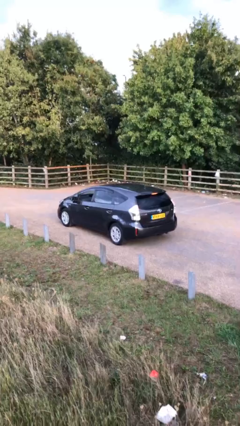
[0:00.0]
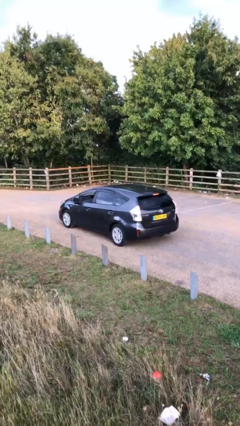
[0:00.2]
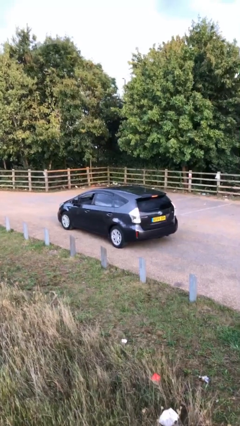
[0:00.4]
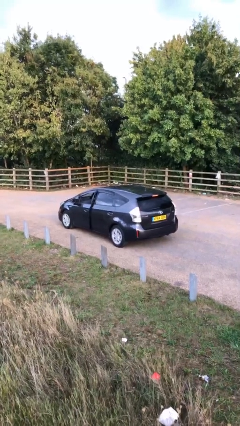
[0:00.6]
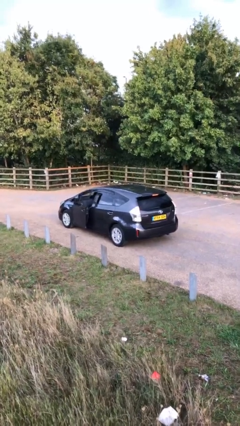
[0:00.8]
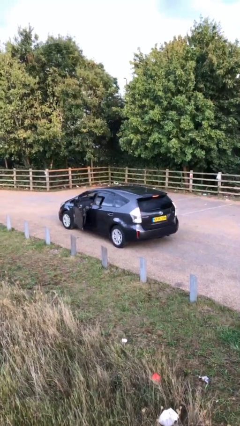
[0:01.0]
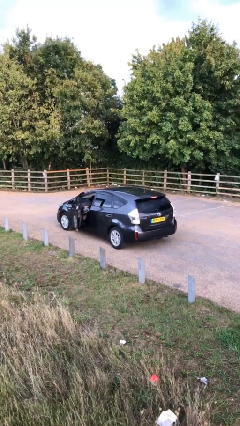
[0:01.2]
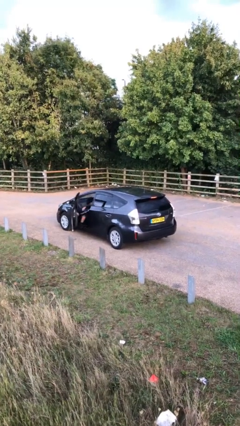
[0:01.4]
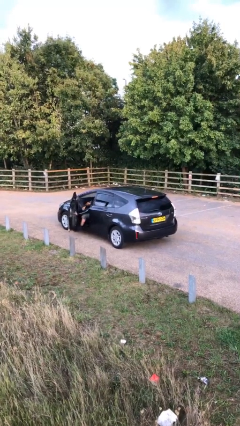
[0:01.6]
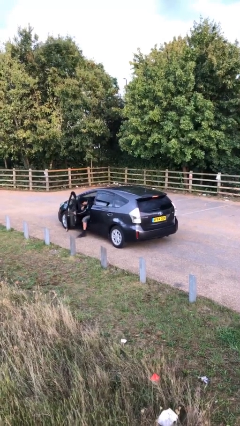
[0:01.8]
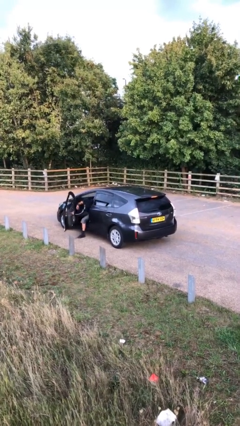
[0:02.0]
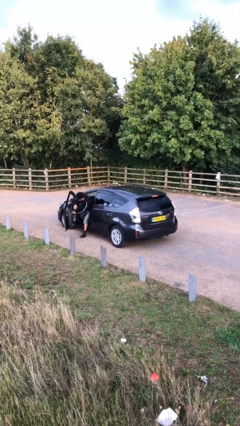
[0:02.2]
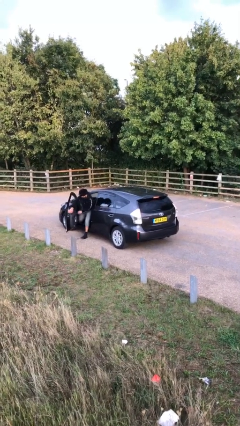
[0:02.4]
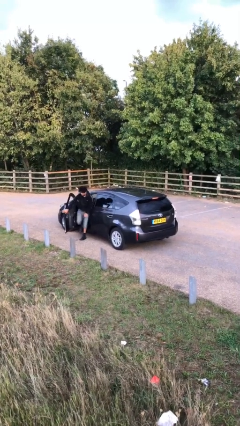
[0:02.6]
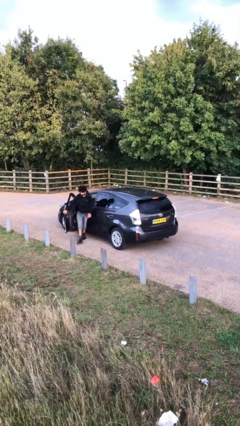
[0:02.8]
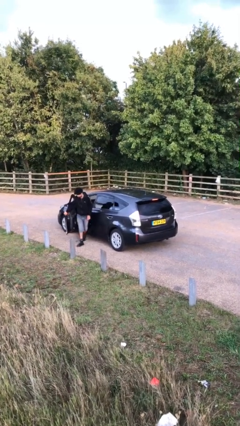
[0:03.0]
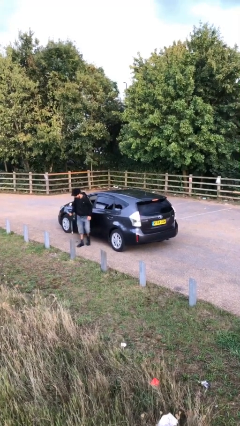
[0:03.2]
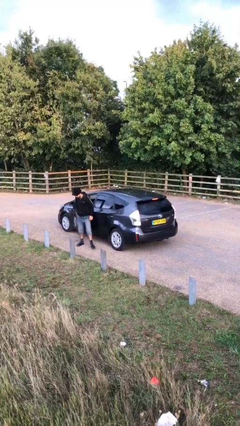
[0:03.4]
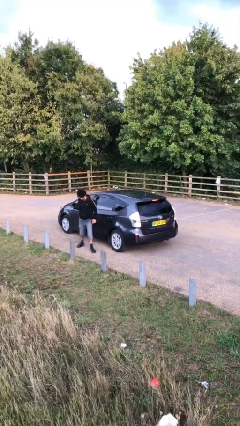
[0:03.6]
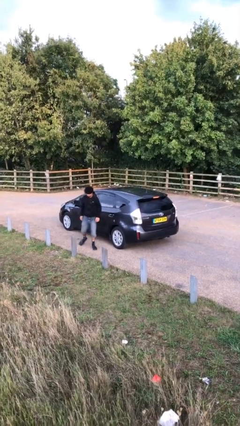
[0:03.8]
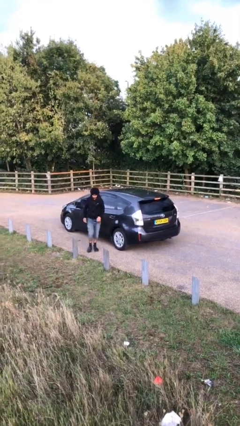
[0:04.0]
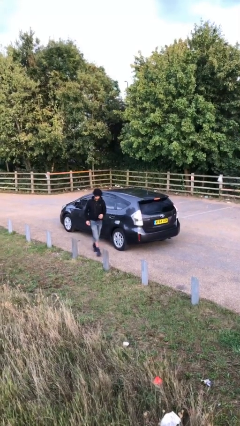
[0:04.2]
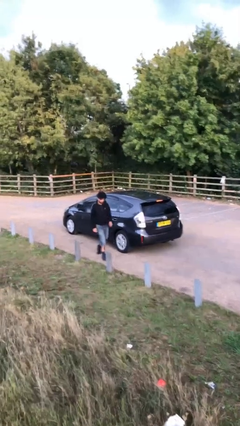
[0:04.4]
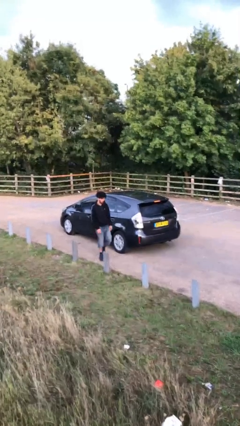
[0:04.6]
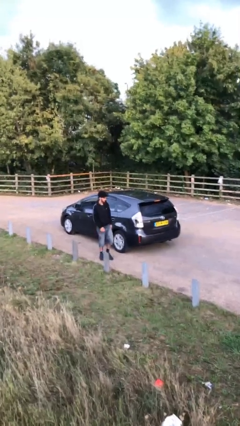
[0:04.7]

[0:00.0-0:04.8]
car drops off person

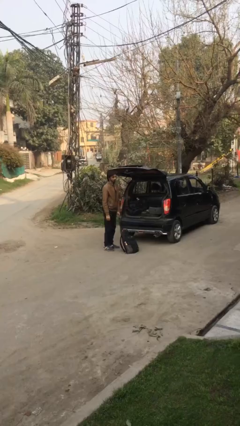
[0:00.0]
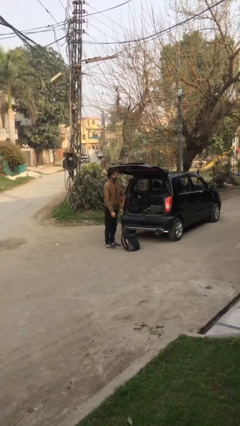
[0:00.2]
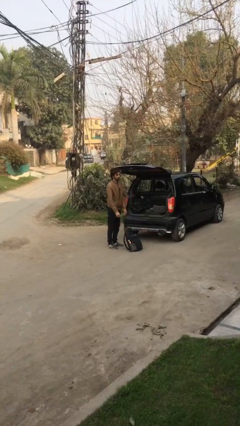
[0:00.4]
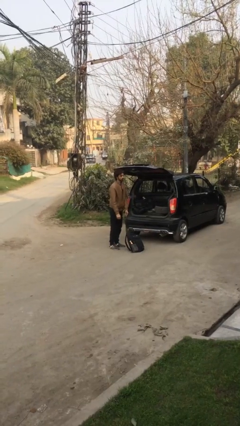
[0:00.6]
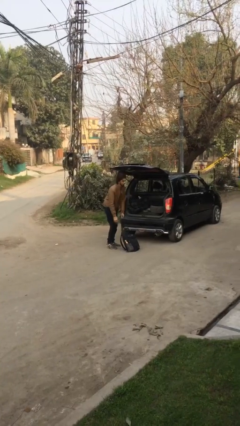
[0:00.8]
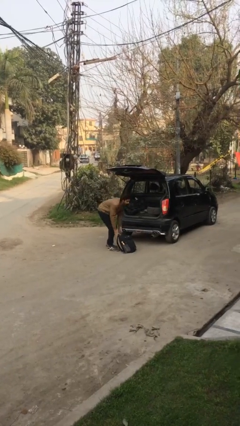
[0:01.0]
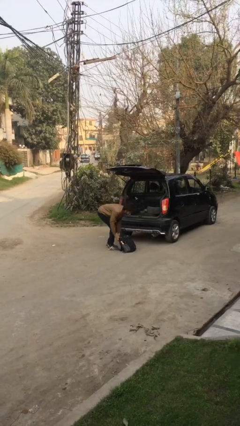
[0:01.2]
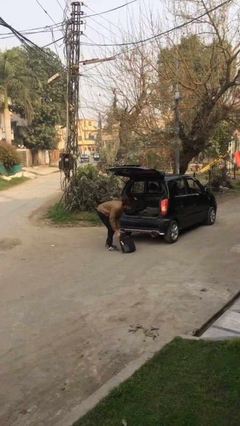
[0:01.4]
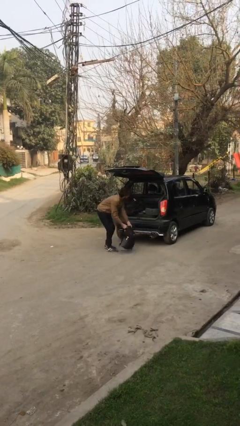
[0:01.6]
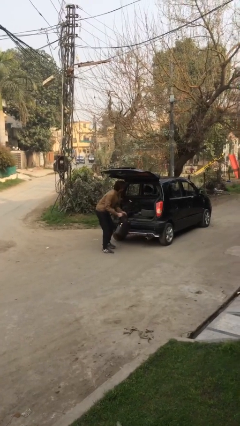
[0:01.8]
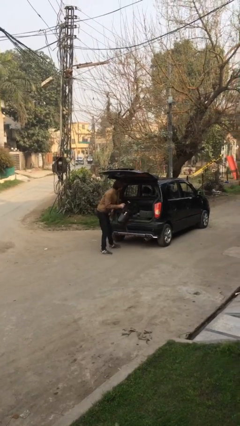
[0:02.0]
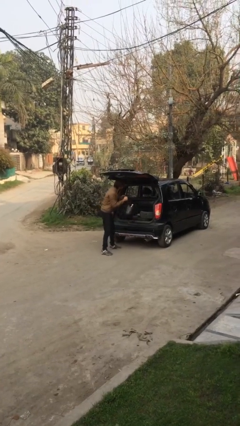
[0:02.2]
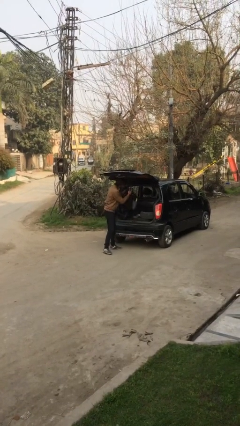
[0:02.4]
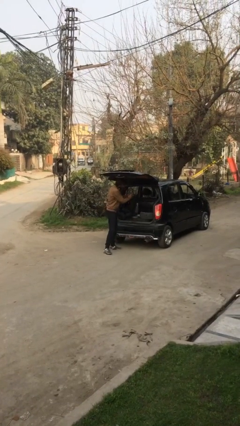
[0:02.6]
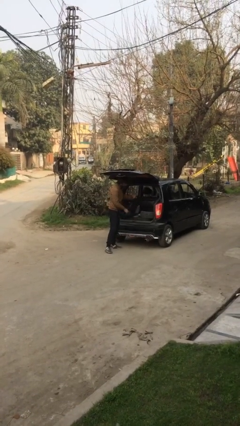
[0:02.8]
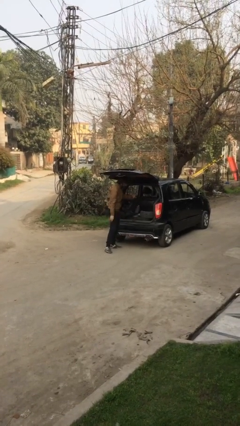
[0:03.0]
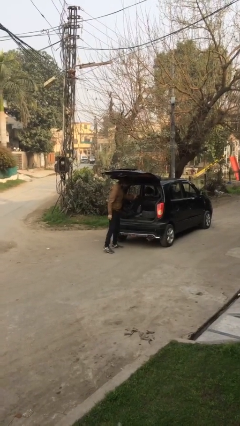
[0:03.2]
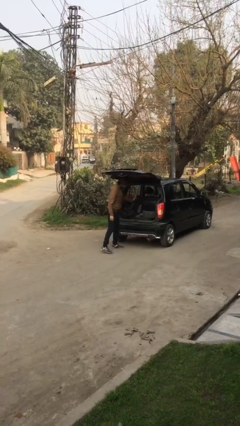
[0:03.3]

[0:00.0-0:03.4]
person loads car

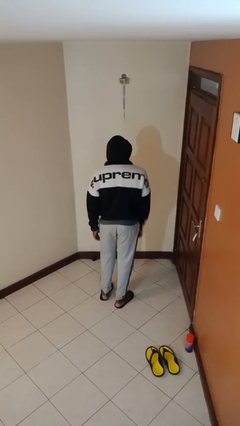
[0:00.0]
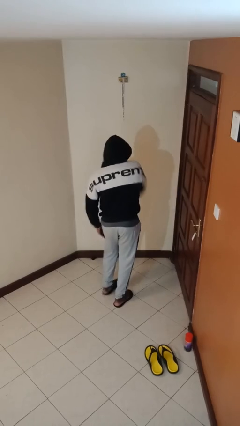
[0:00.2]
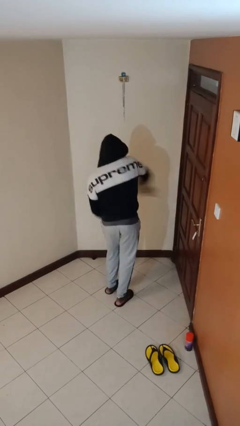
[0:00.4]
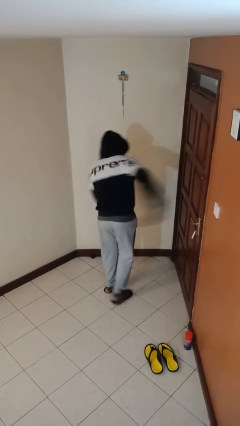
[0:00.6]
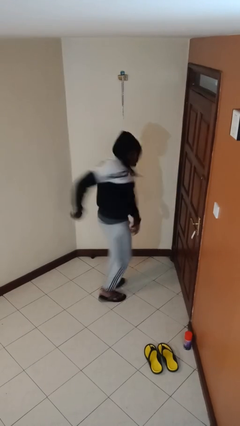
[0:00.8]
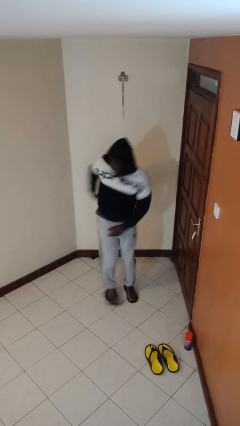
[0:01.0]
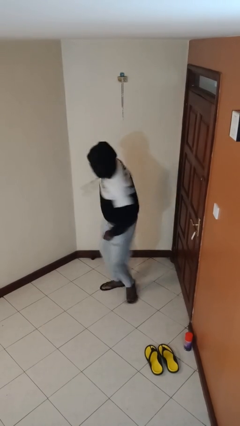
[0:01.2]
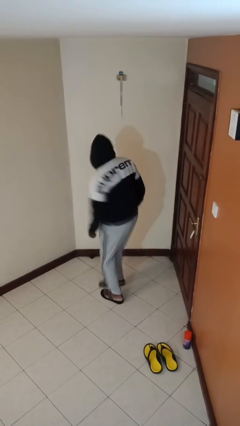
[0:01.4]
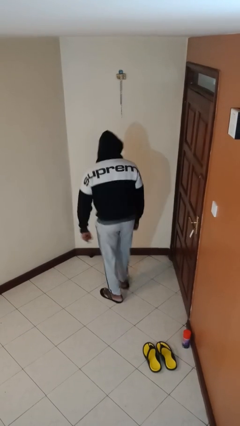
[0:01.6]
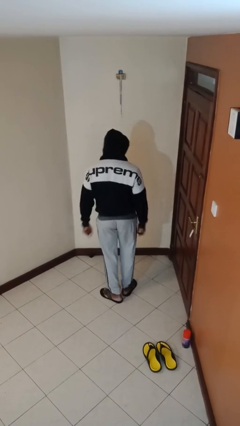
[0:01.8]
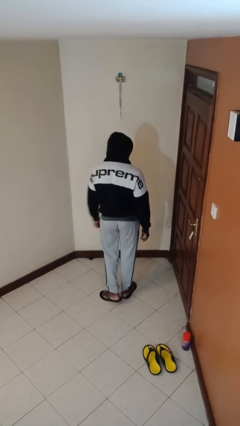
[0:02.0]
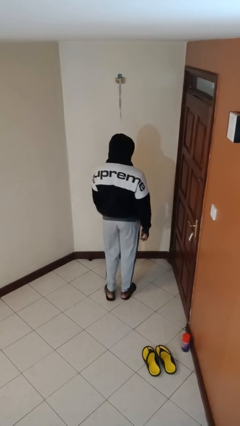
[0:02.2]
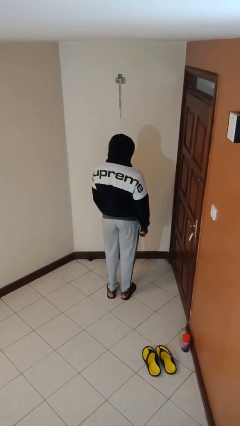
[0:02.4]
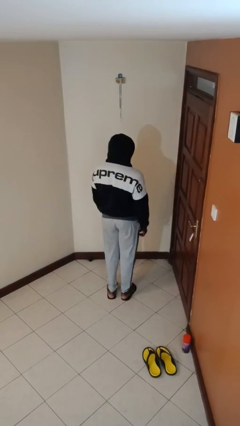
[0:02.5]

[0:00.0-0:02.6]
person twirls

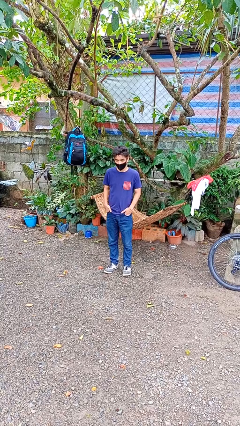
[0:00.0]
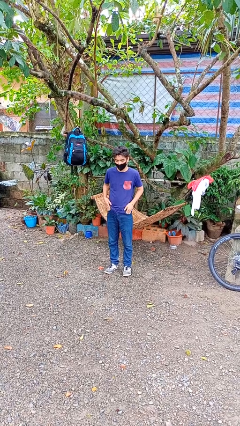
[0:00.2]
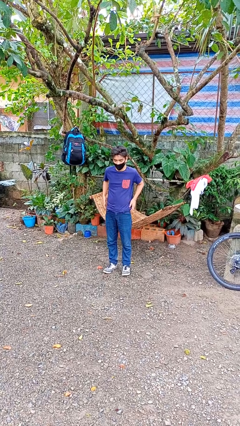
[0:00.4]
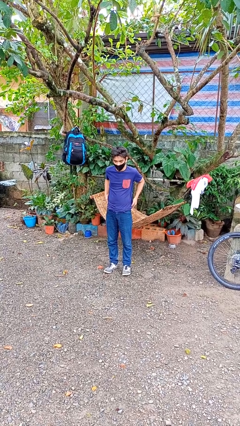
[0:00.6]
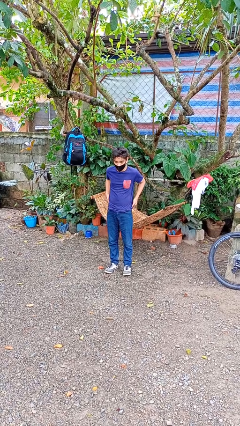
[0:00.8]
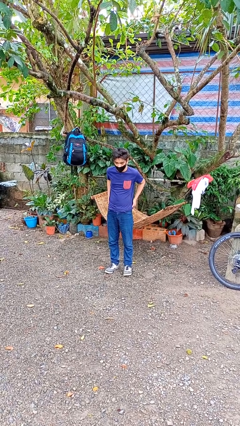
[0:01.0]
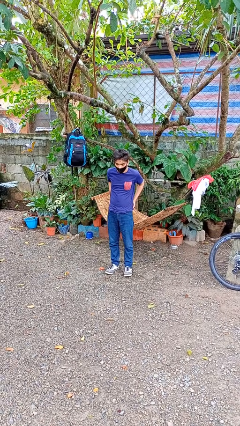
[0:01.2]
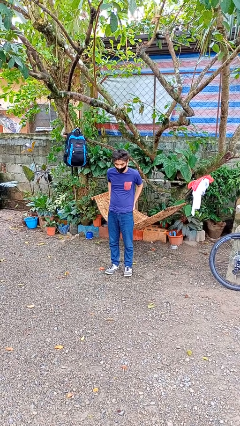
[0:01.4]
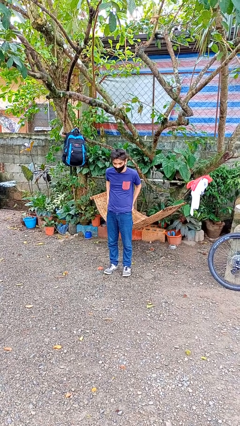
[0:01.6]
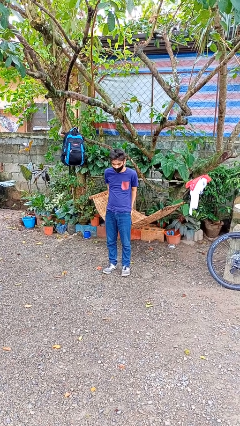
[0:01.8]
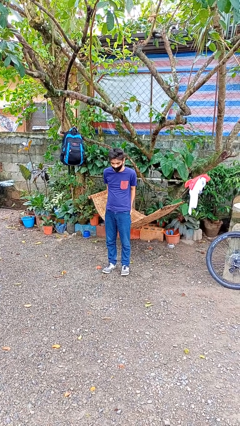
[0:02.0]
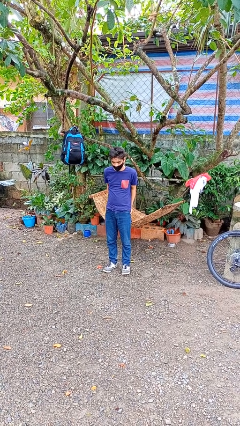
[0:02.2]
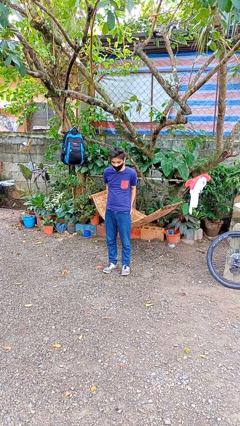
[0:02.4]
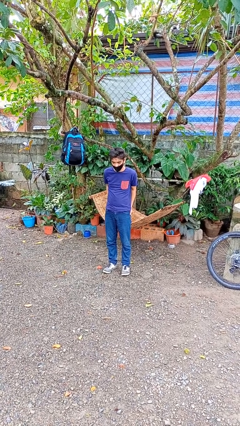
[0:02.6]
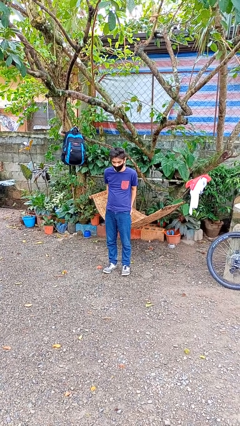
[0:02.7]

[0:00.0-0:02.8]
person puts hands in back pockets

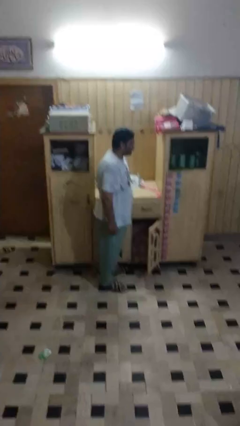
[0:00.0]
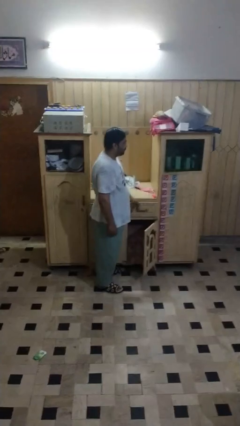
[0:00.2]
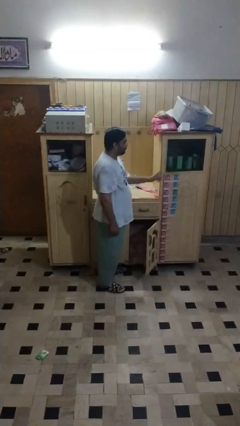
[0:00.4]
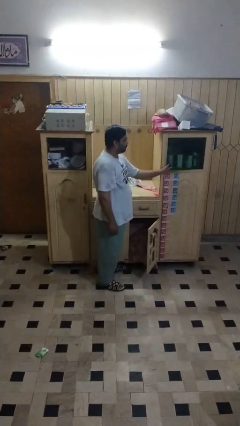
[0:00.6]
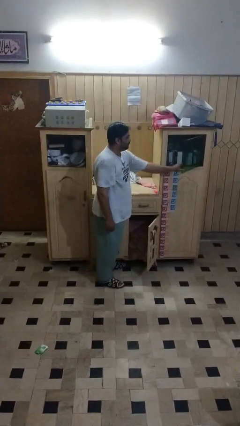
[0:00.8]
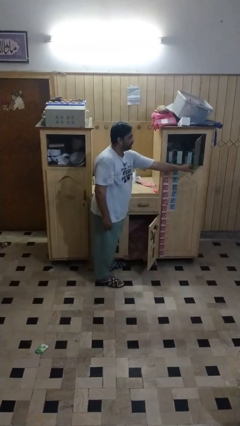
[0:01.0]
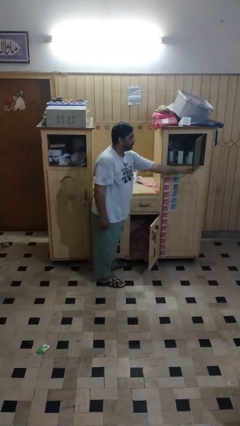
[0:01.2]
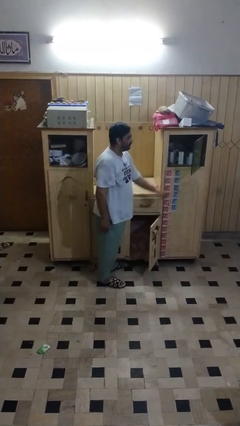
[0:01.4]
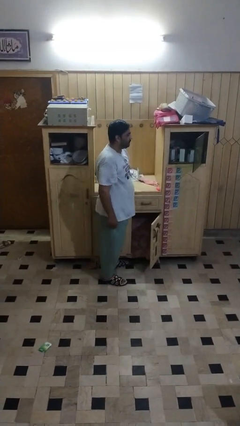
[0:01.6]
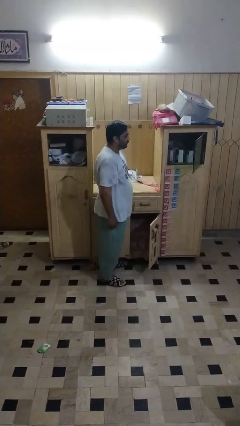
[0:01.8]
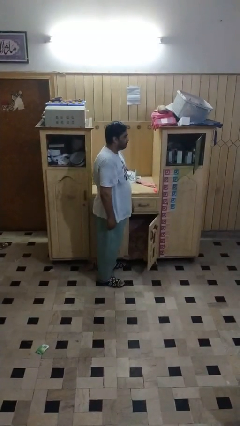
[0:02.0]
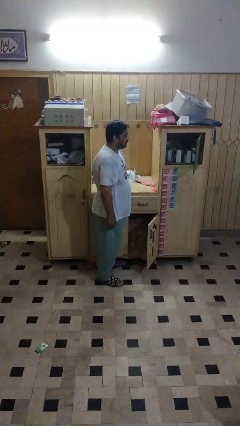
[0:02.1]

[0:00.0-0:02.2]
person closes cabinet

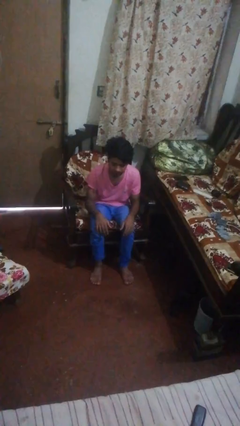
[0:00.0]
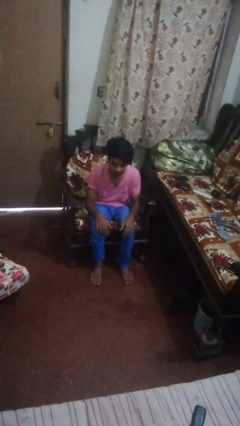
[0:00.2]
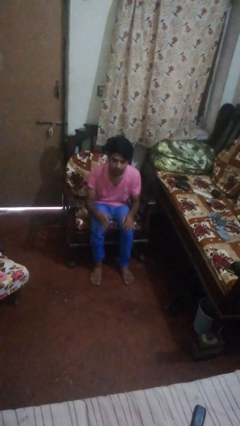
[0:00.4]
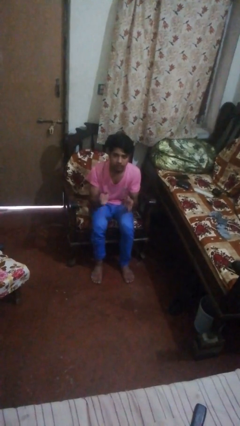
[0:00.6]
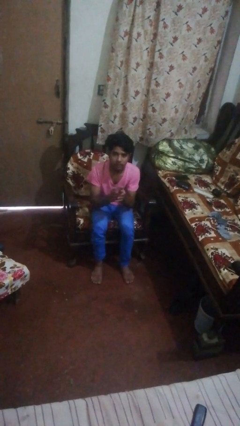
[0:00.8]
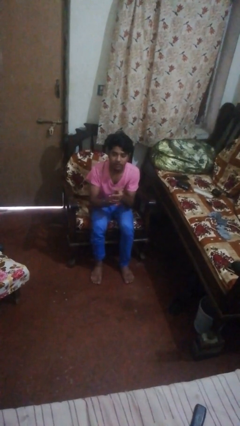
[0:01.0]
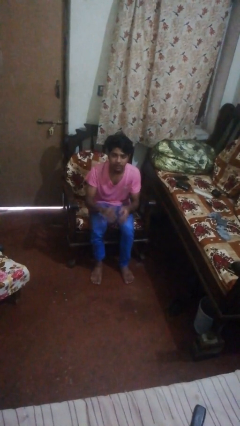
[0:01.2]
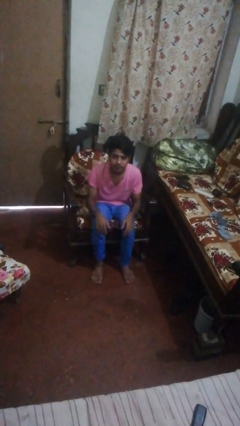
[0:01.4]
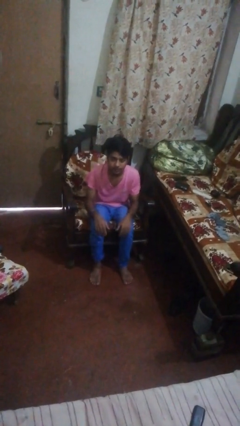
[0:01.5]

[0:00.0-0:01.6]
person claps hands

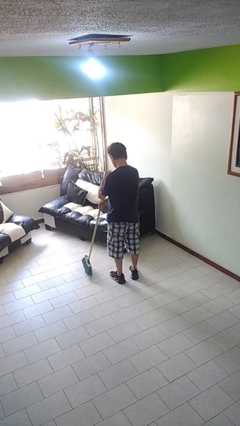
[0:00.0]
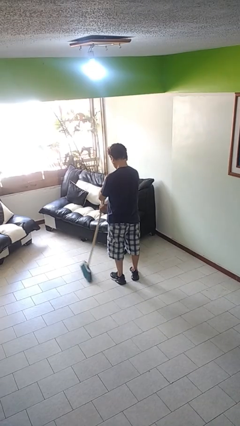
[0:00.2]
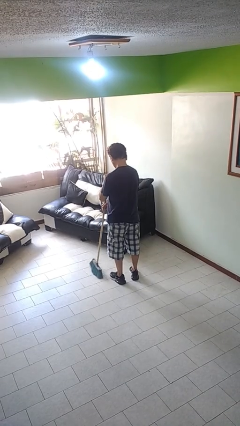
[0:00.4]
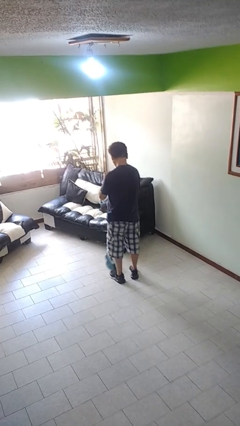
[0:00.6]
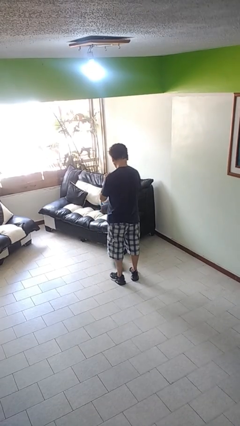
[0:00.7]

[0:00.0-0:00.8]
person sweeps floor
